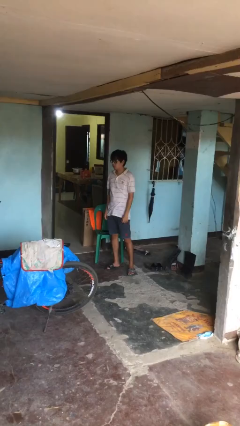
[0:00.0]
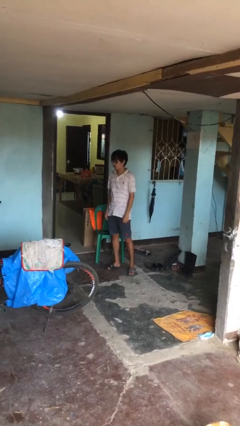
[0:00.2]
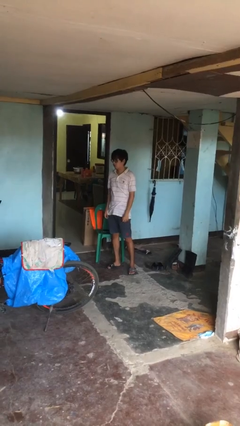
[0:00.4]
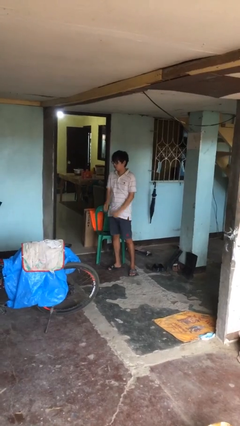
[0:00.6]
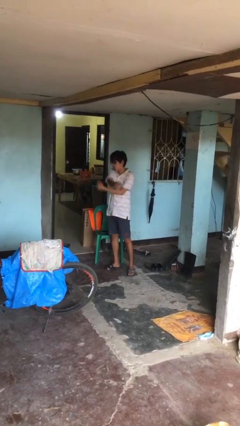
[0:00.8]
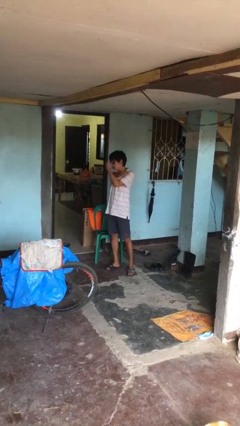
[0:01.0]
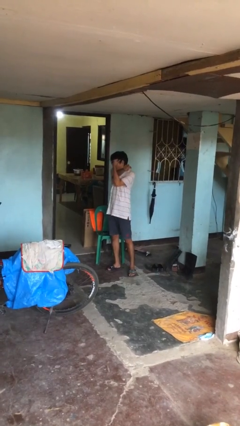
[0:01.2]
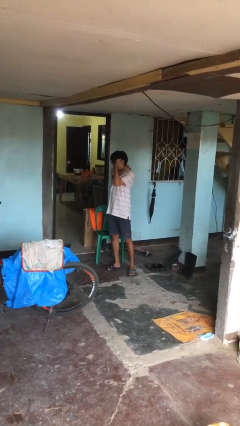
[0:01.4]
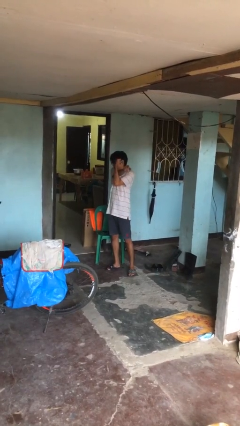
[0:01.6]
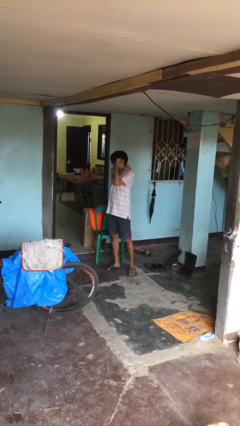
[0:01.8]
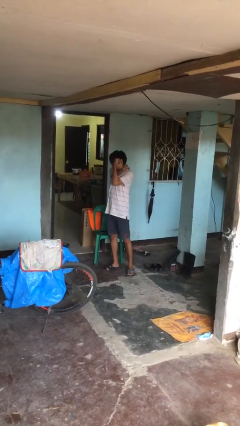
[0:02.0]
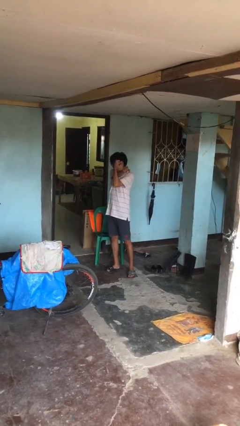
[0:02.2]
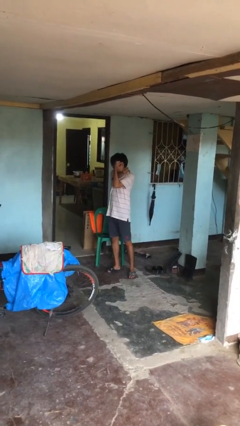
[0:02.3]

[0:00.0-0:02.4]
person crosses arms

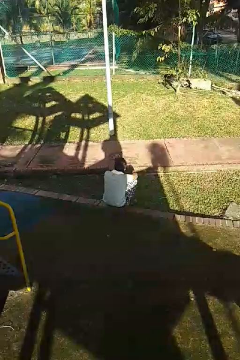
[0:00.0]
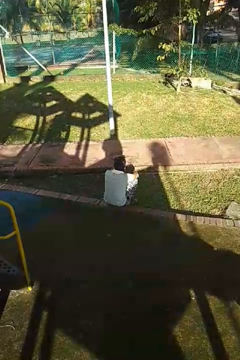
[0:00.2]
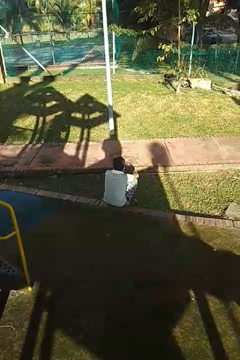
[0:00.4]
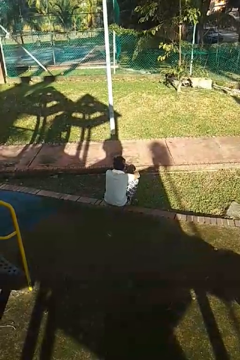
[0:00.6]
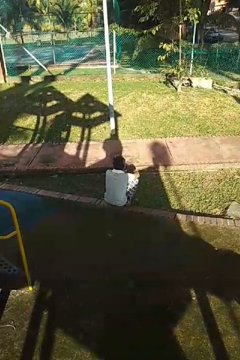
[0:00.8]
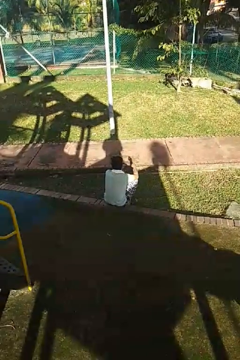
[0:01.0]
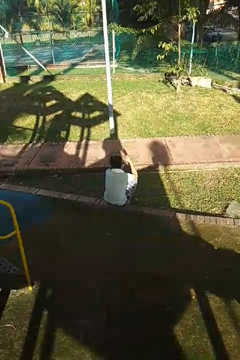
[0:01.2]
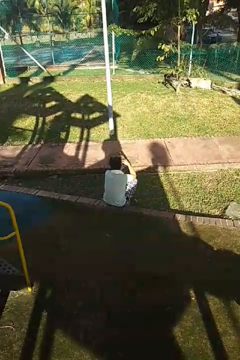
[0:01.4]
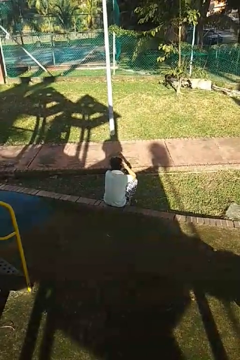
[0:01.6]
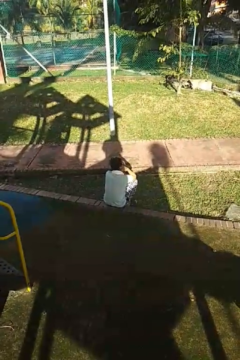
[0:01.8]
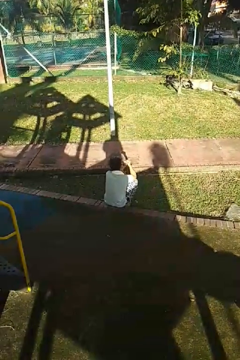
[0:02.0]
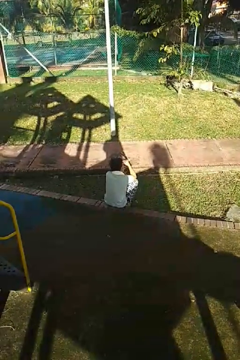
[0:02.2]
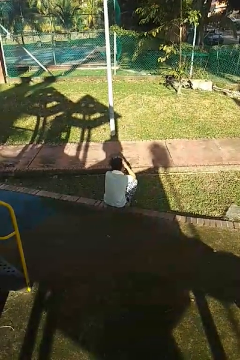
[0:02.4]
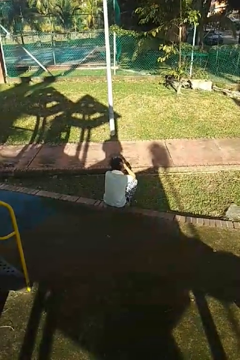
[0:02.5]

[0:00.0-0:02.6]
person strokes hair

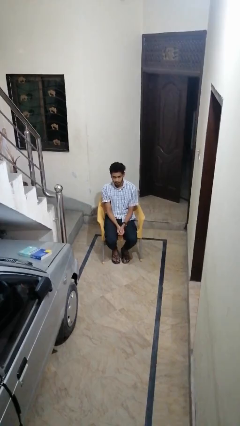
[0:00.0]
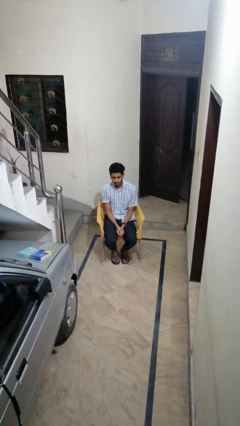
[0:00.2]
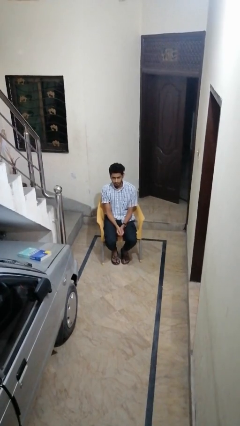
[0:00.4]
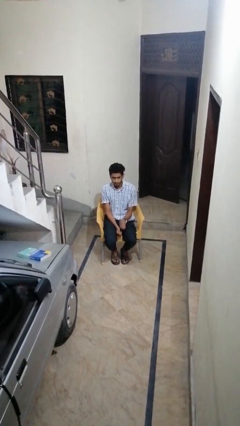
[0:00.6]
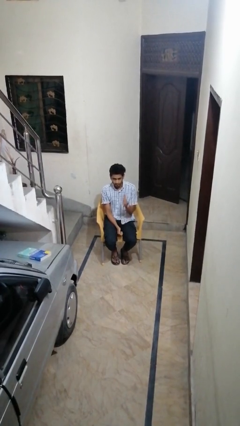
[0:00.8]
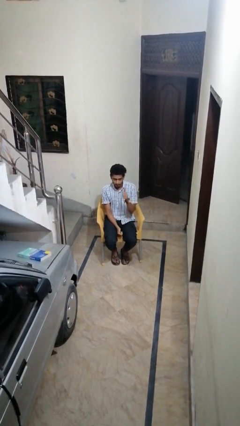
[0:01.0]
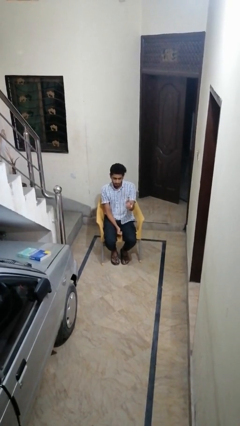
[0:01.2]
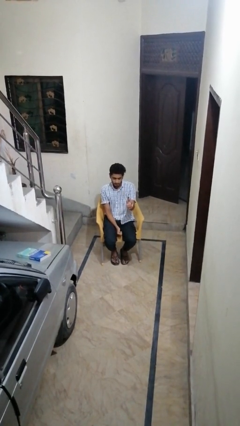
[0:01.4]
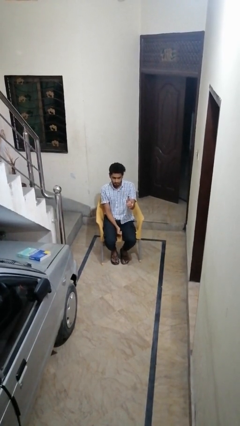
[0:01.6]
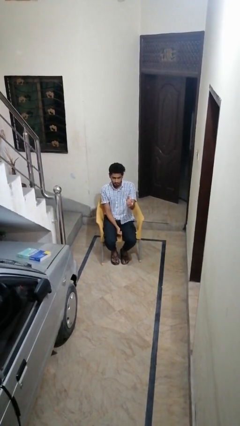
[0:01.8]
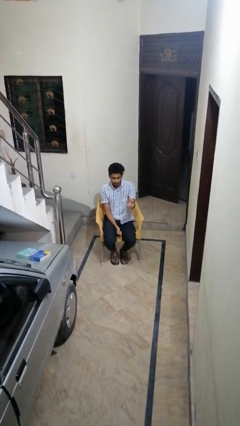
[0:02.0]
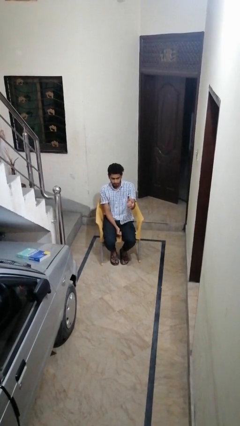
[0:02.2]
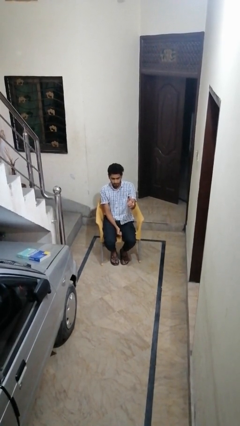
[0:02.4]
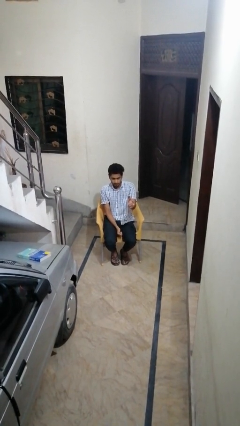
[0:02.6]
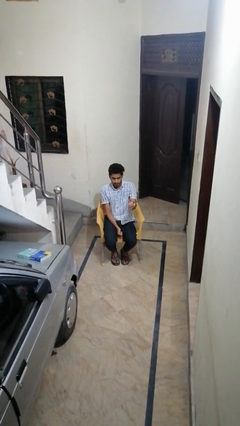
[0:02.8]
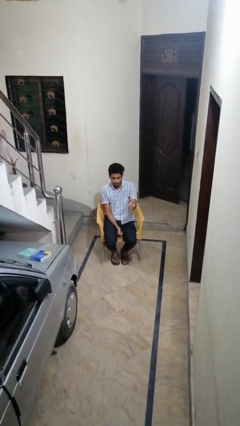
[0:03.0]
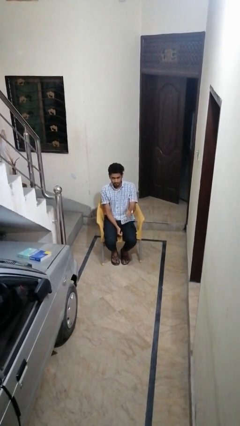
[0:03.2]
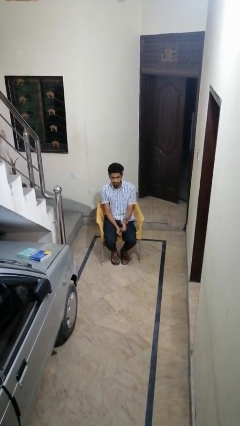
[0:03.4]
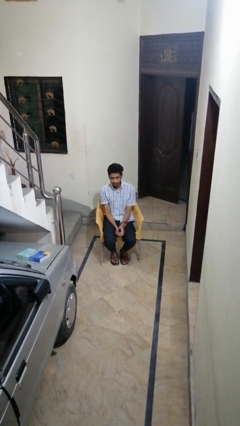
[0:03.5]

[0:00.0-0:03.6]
person gestures thumbs up

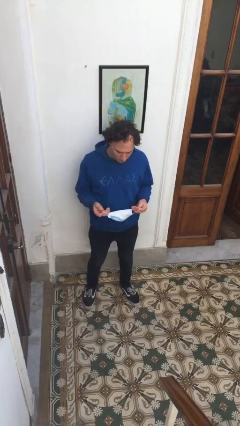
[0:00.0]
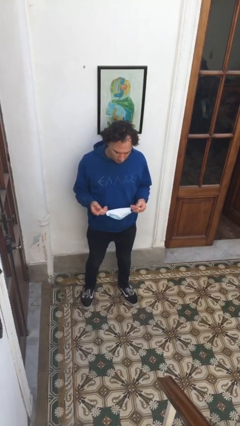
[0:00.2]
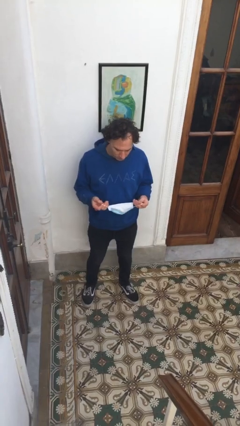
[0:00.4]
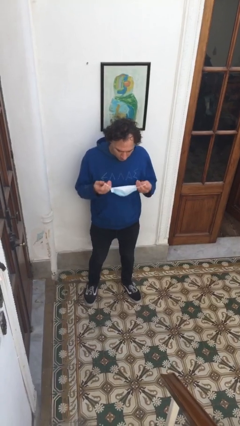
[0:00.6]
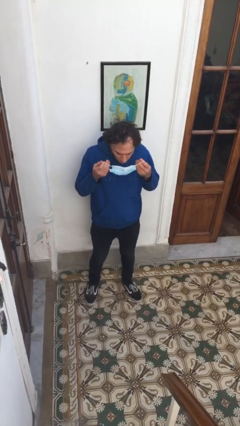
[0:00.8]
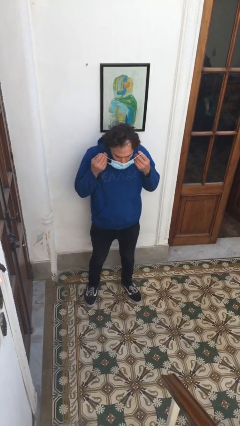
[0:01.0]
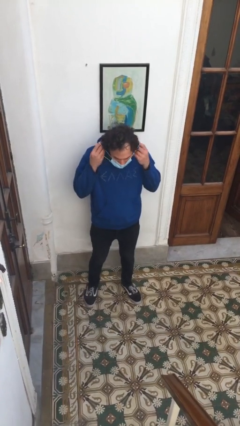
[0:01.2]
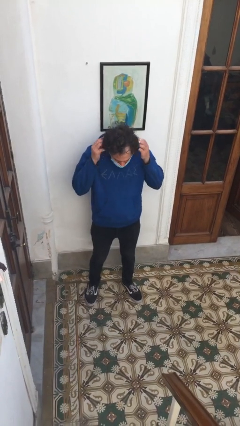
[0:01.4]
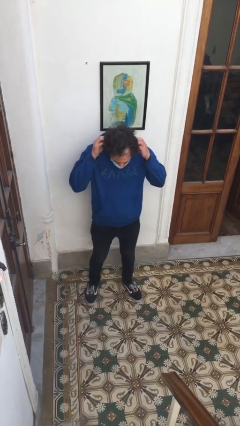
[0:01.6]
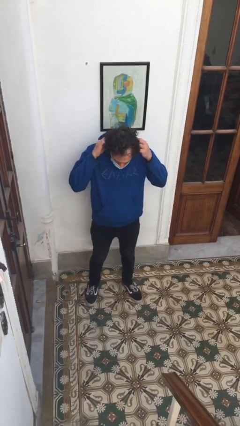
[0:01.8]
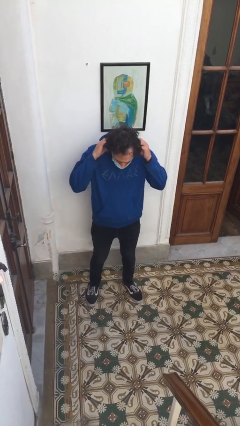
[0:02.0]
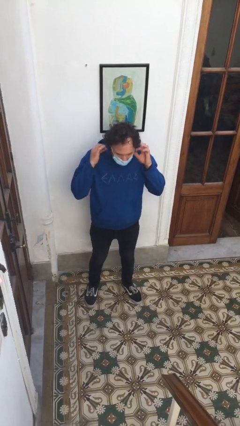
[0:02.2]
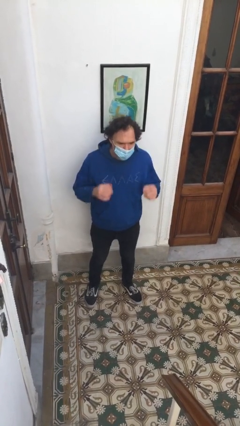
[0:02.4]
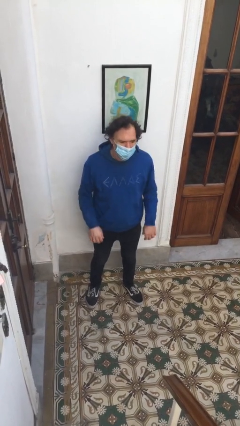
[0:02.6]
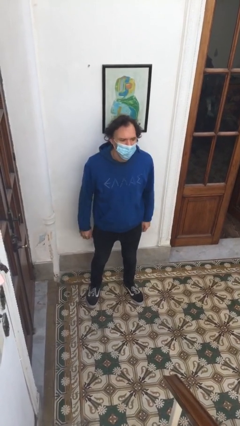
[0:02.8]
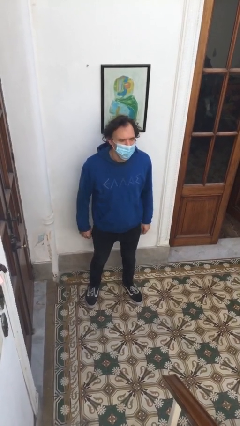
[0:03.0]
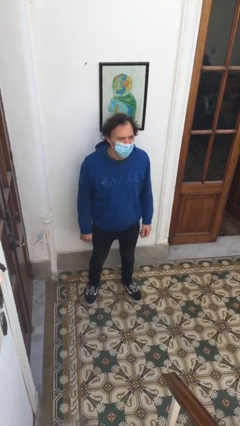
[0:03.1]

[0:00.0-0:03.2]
person puts on facemask

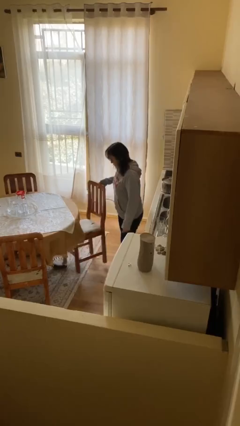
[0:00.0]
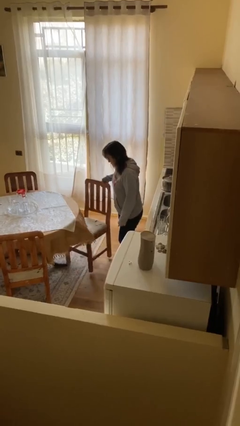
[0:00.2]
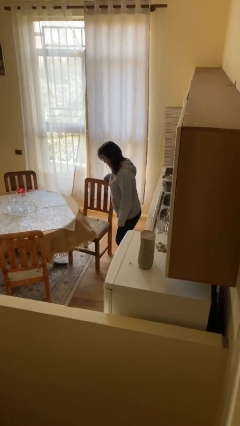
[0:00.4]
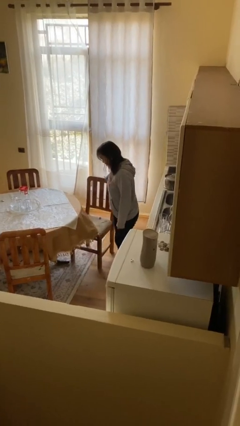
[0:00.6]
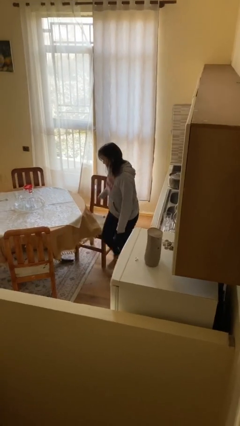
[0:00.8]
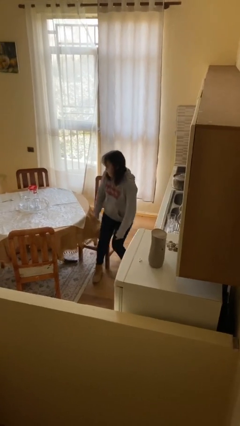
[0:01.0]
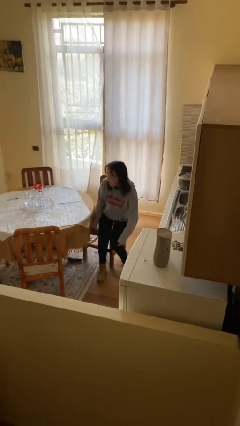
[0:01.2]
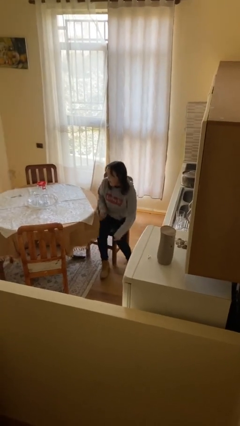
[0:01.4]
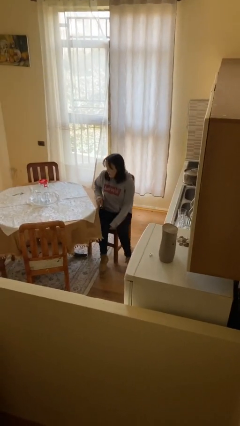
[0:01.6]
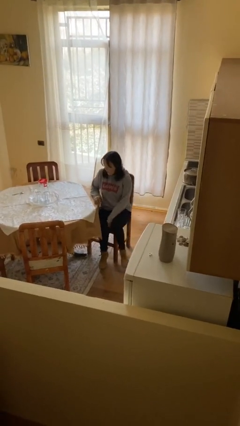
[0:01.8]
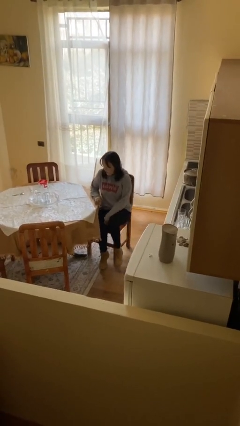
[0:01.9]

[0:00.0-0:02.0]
person sits down

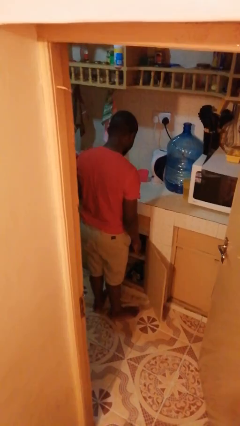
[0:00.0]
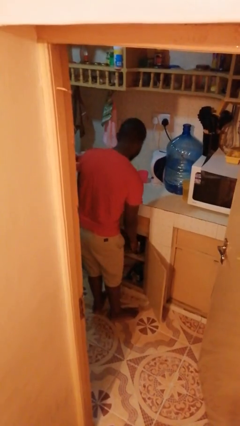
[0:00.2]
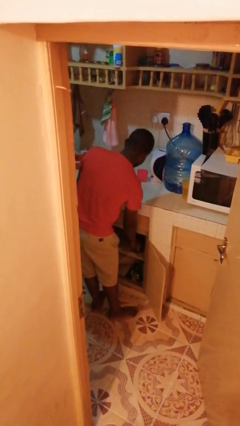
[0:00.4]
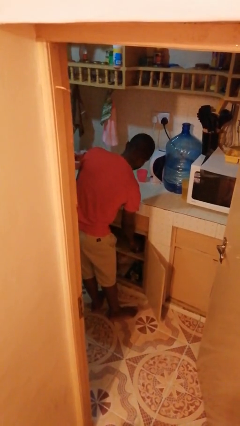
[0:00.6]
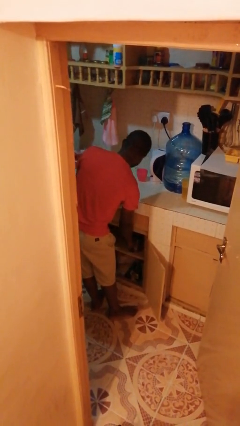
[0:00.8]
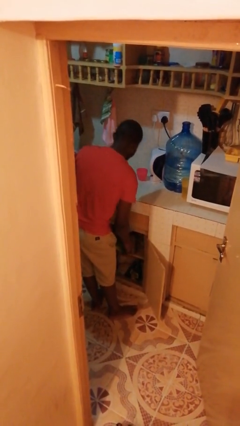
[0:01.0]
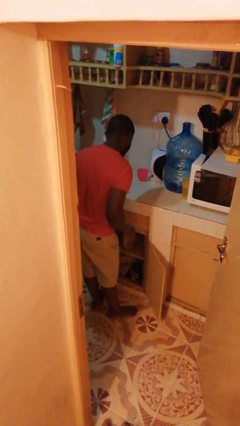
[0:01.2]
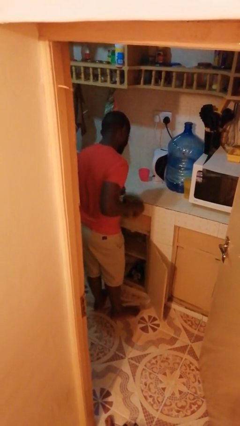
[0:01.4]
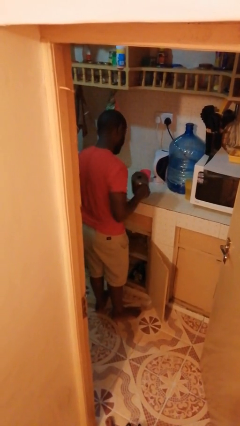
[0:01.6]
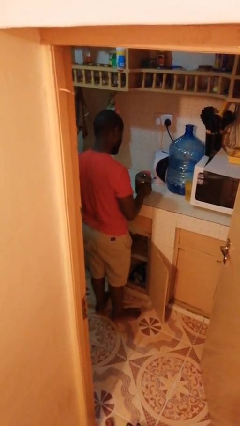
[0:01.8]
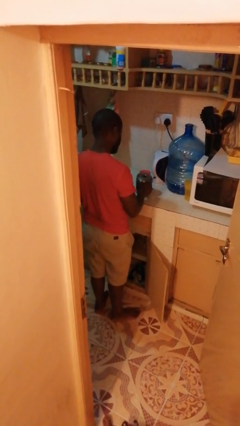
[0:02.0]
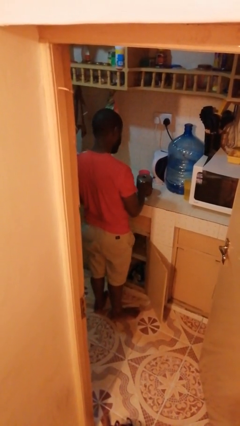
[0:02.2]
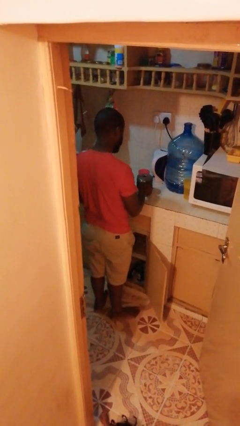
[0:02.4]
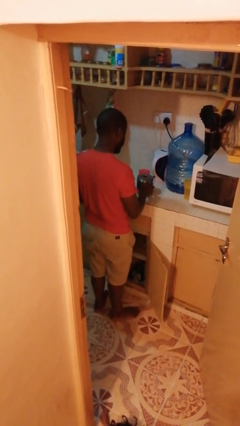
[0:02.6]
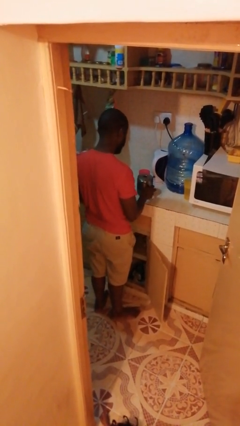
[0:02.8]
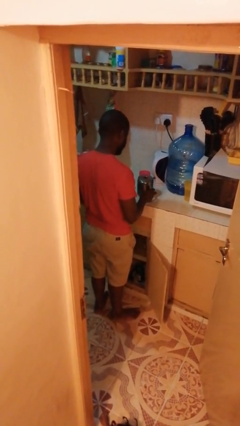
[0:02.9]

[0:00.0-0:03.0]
person takes object from cabinet

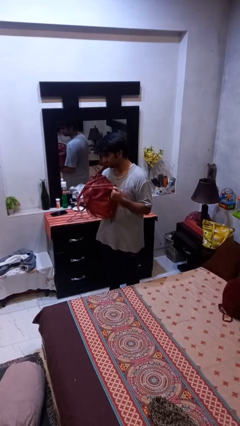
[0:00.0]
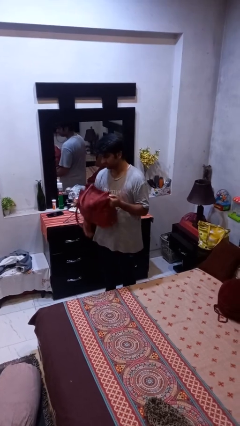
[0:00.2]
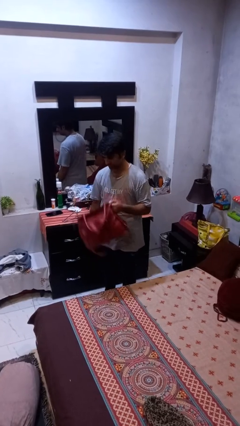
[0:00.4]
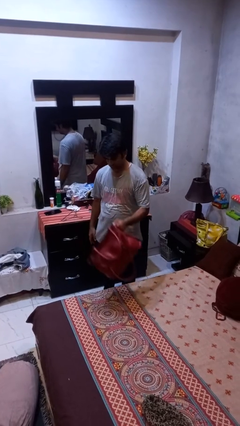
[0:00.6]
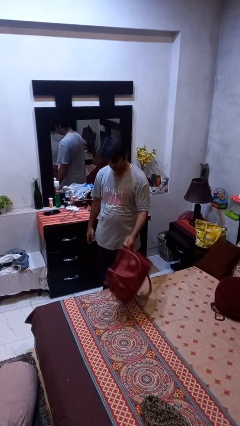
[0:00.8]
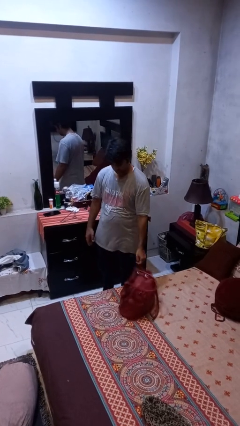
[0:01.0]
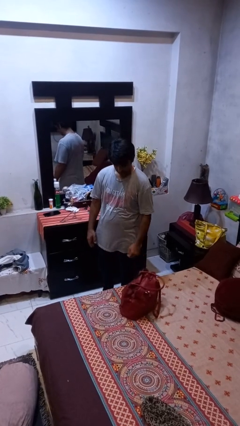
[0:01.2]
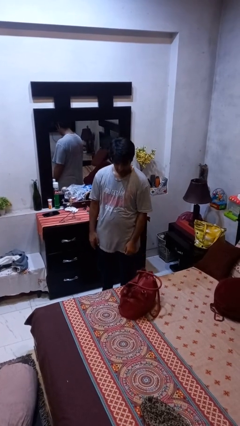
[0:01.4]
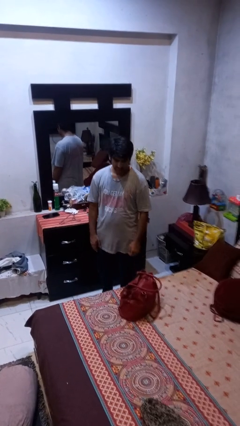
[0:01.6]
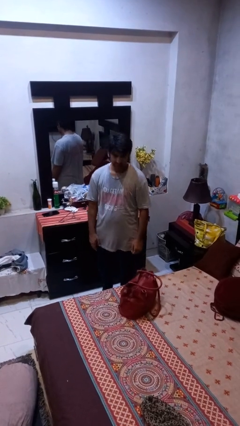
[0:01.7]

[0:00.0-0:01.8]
person puts down object on bed
